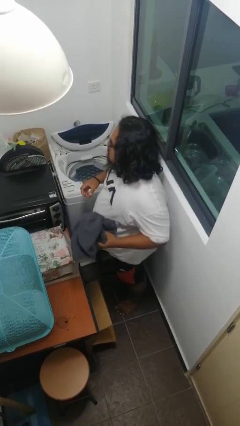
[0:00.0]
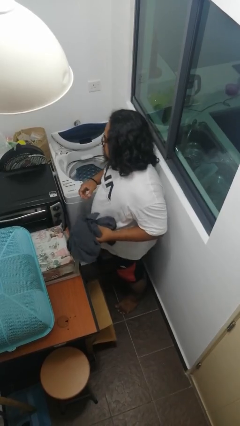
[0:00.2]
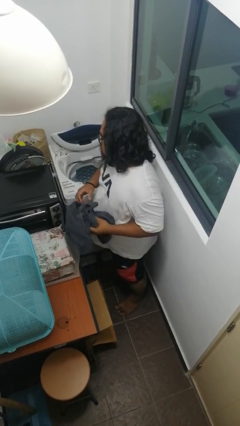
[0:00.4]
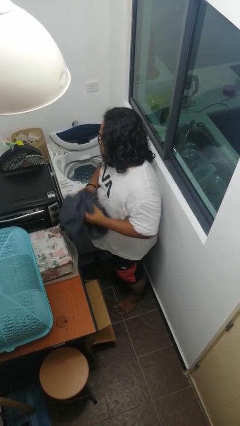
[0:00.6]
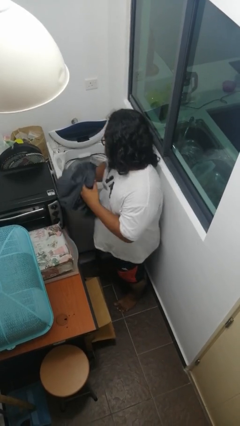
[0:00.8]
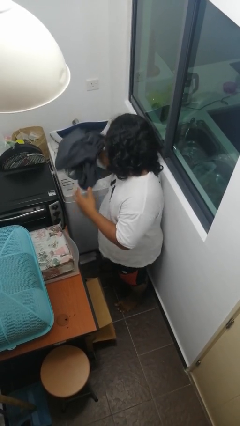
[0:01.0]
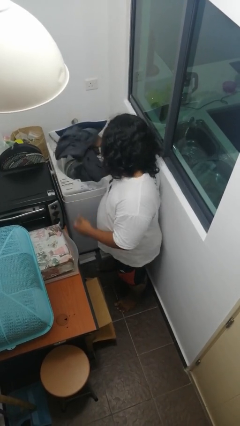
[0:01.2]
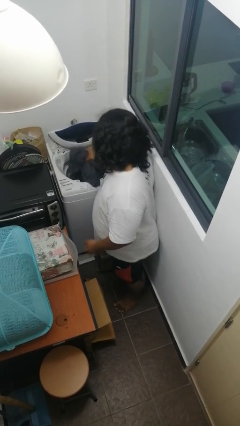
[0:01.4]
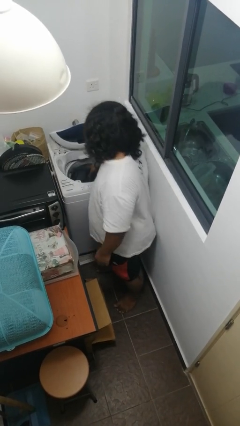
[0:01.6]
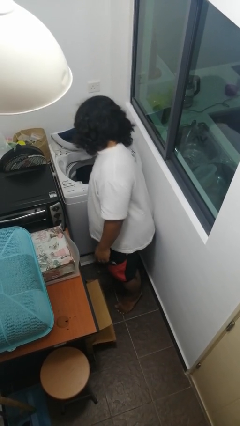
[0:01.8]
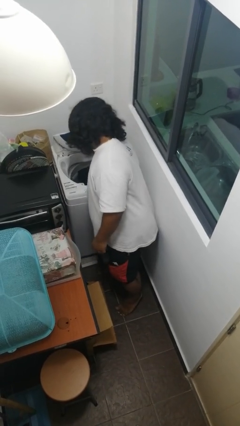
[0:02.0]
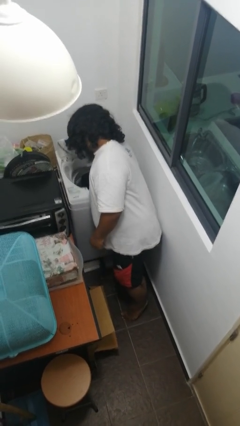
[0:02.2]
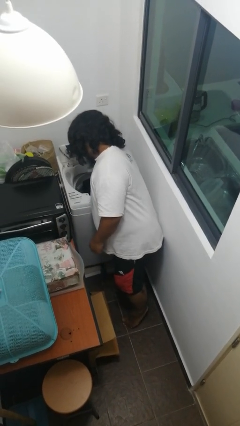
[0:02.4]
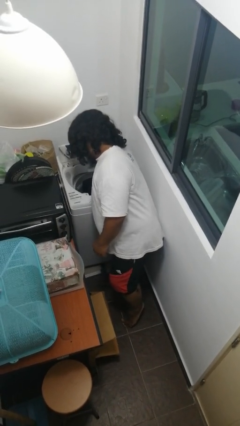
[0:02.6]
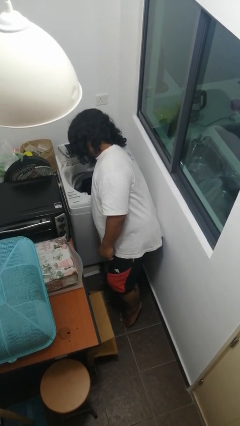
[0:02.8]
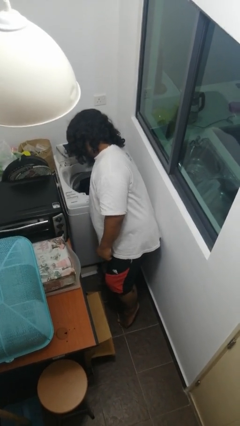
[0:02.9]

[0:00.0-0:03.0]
person loads clotheswasher

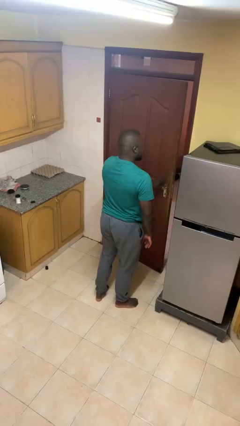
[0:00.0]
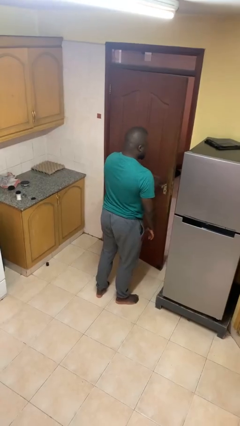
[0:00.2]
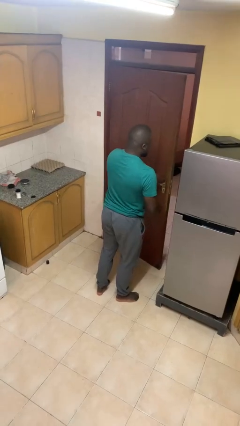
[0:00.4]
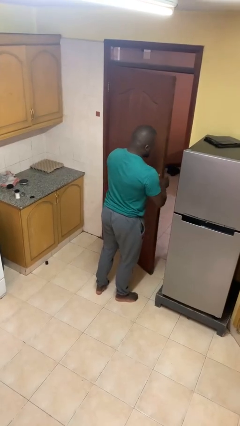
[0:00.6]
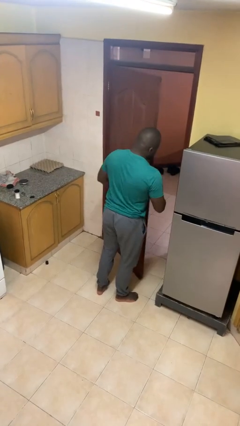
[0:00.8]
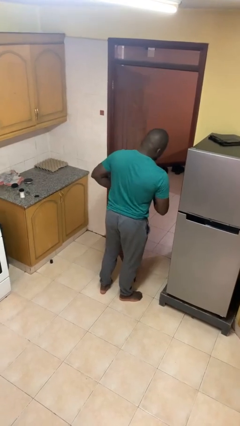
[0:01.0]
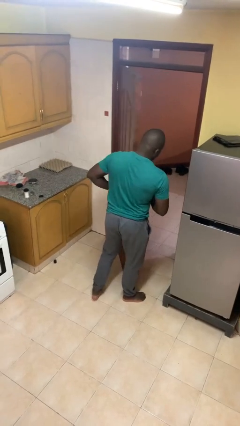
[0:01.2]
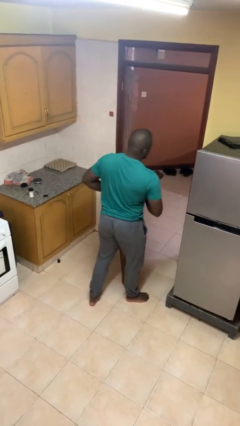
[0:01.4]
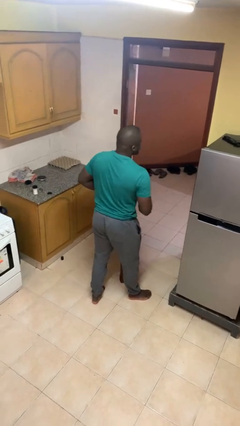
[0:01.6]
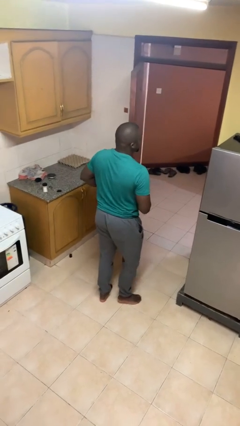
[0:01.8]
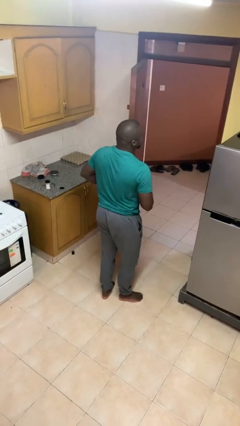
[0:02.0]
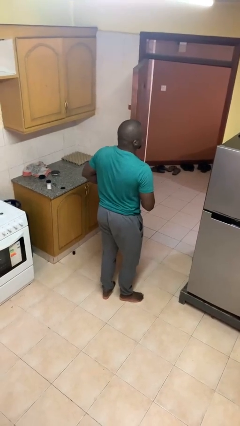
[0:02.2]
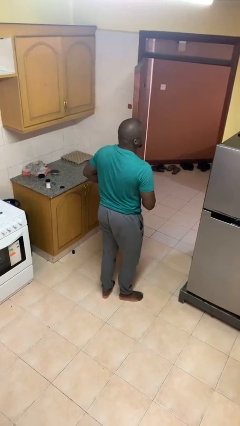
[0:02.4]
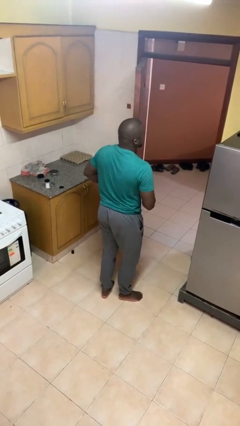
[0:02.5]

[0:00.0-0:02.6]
person opens facility door

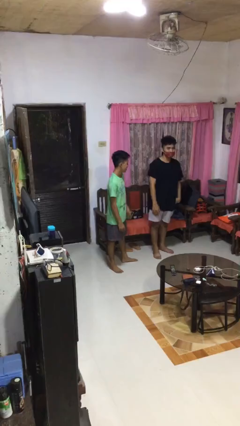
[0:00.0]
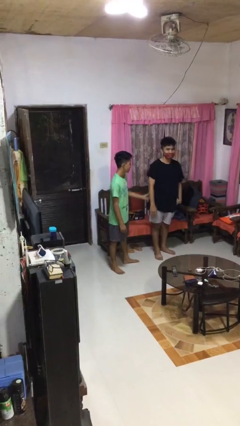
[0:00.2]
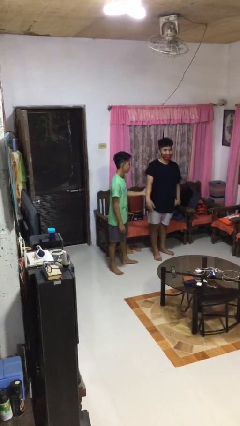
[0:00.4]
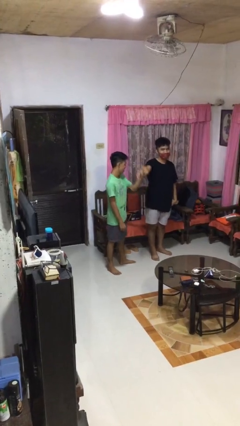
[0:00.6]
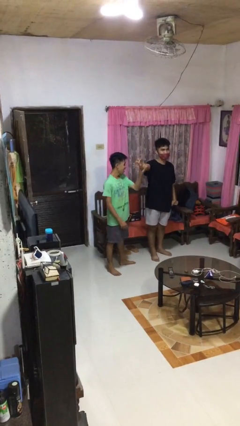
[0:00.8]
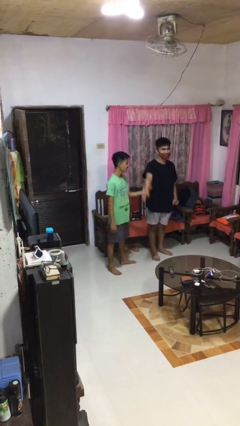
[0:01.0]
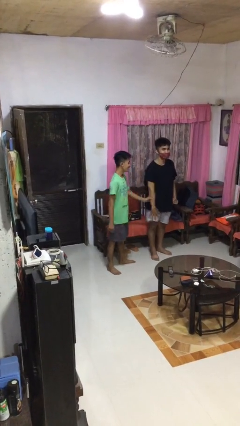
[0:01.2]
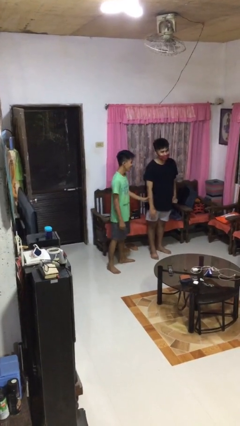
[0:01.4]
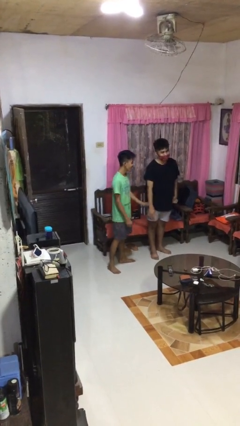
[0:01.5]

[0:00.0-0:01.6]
person grabs person by forearm

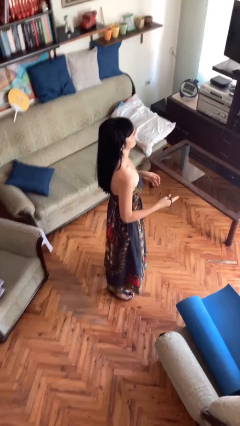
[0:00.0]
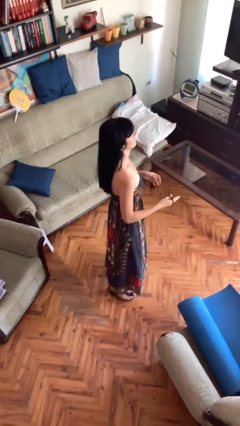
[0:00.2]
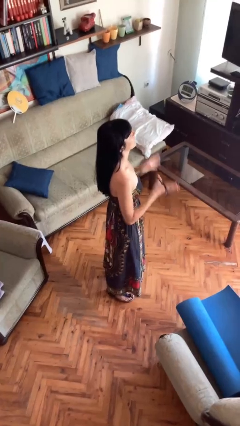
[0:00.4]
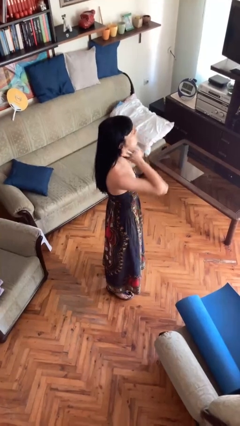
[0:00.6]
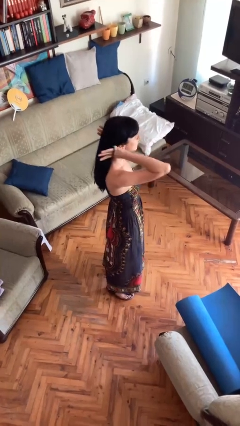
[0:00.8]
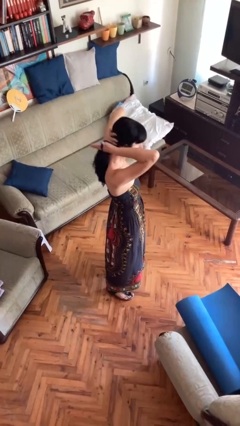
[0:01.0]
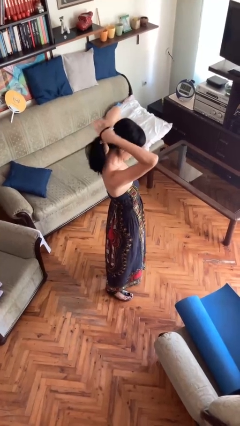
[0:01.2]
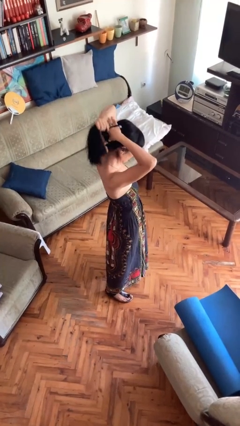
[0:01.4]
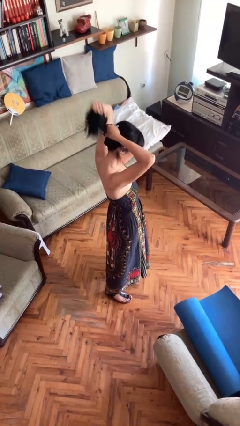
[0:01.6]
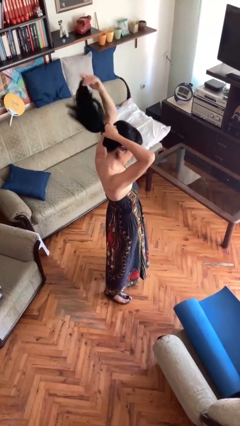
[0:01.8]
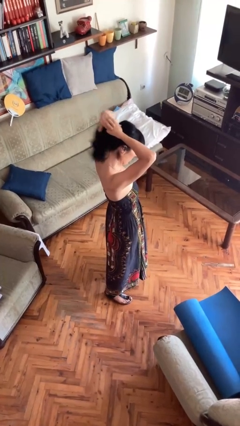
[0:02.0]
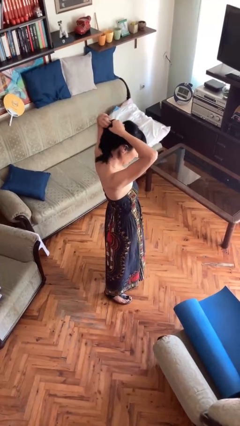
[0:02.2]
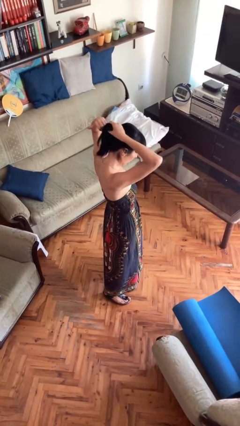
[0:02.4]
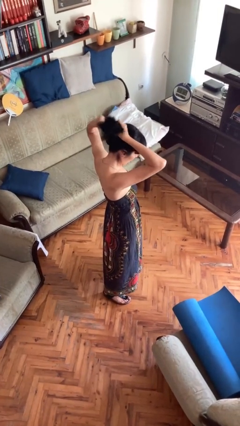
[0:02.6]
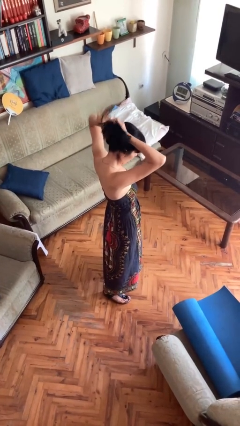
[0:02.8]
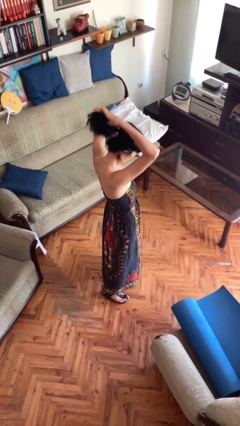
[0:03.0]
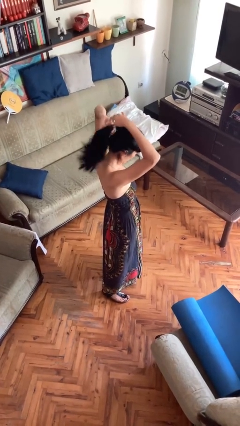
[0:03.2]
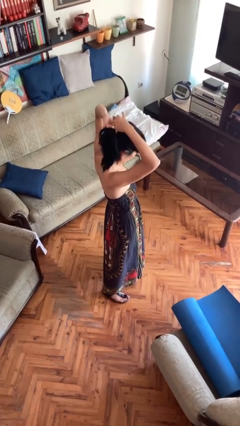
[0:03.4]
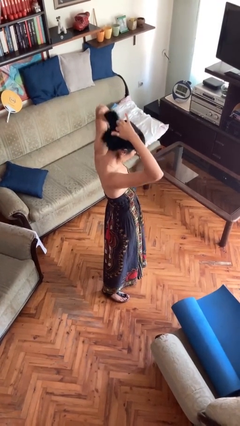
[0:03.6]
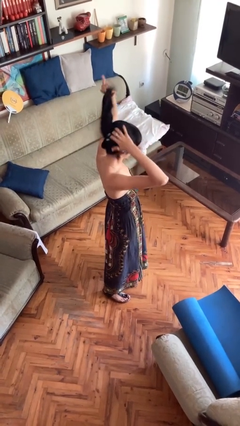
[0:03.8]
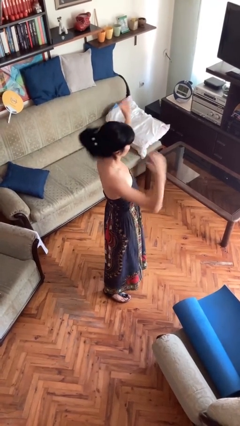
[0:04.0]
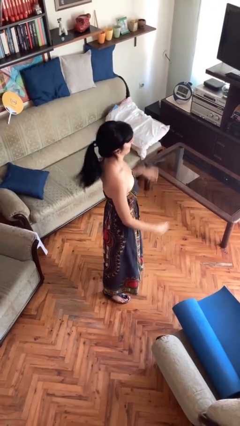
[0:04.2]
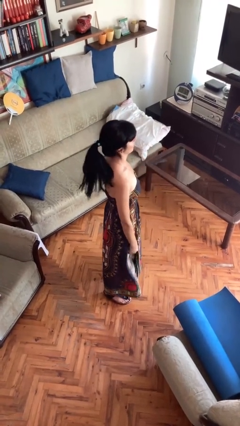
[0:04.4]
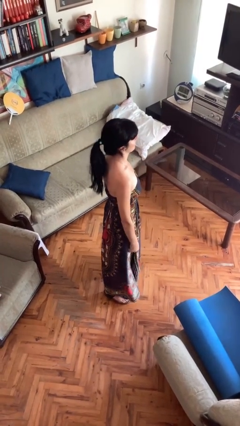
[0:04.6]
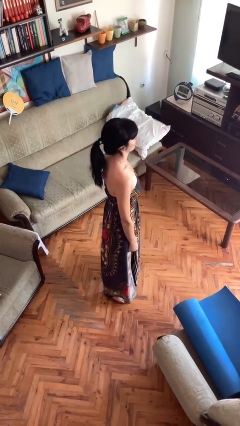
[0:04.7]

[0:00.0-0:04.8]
person puts hair in ponytail

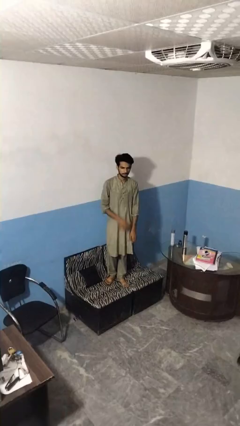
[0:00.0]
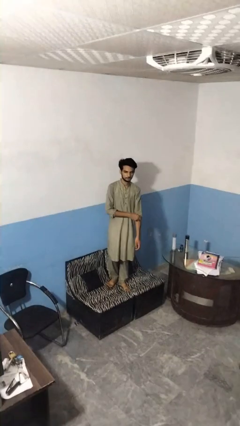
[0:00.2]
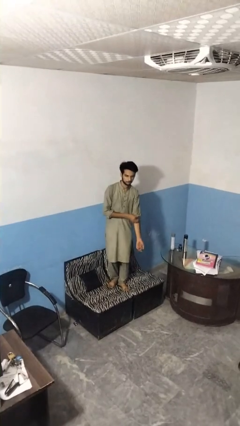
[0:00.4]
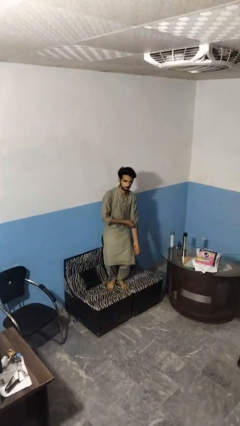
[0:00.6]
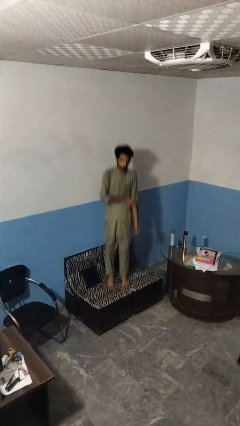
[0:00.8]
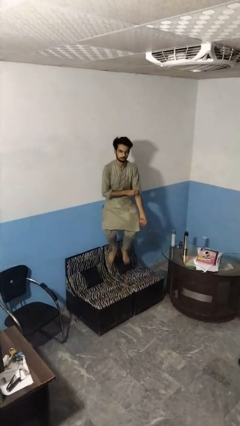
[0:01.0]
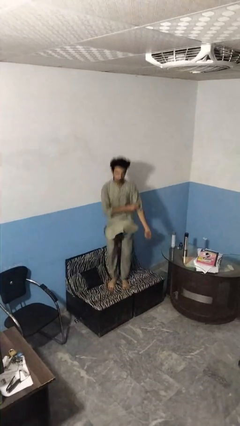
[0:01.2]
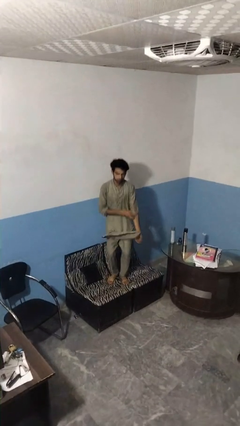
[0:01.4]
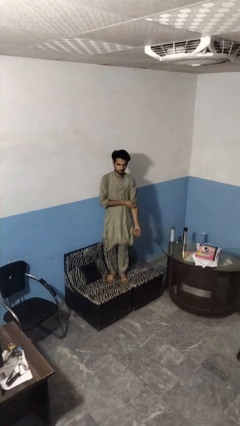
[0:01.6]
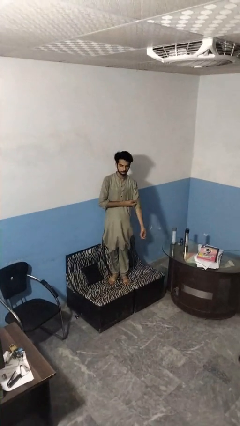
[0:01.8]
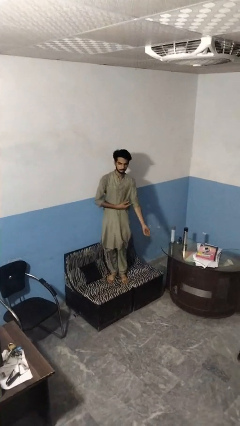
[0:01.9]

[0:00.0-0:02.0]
person jumps on couch

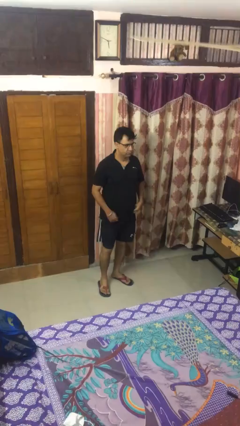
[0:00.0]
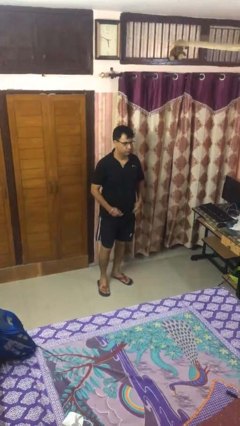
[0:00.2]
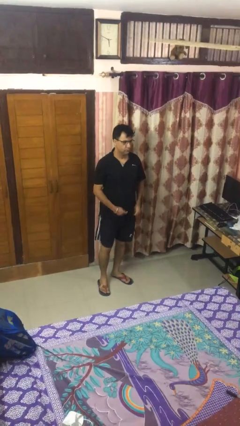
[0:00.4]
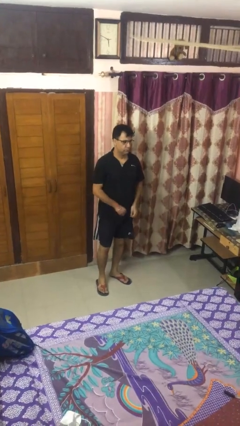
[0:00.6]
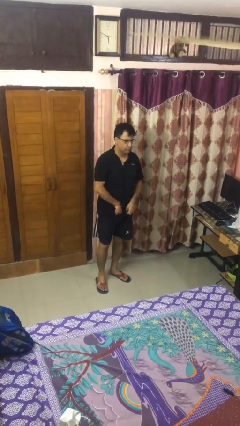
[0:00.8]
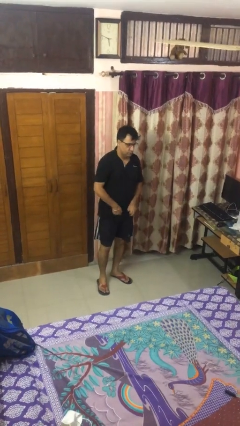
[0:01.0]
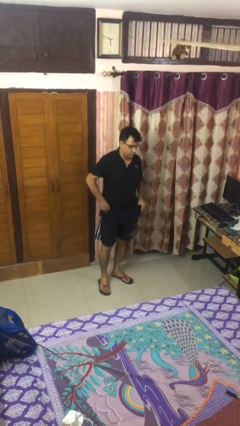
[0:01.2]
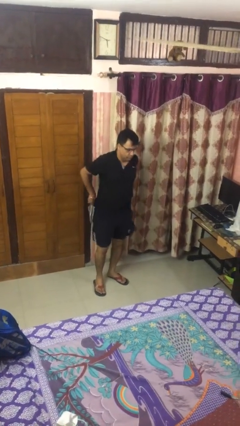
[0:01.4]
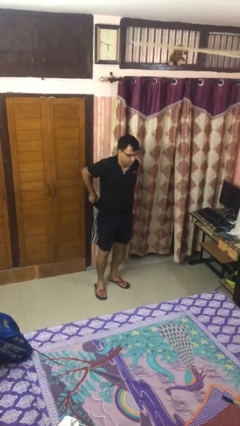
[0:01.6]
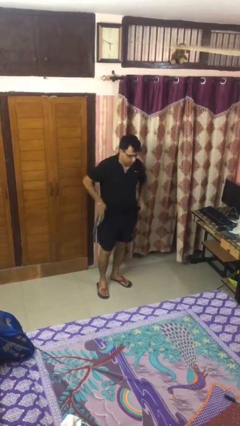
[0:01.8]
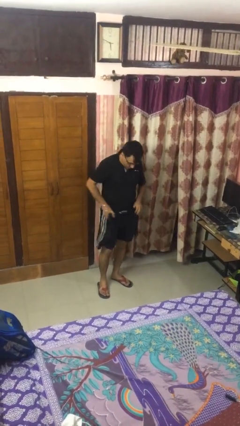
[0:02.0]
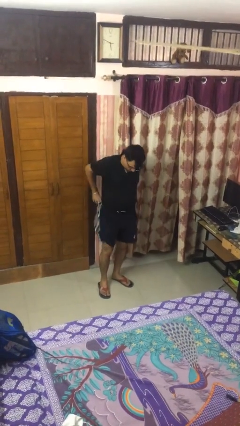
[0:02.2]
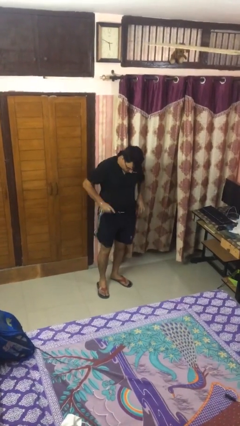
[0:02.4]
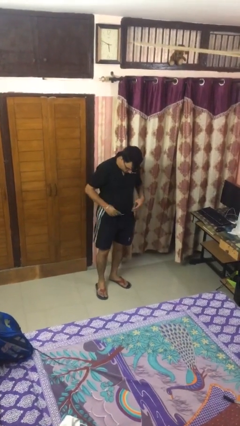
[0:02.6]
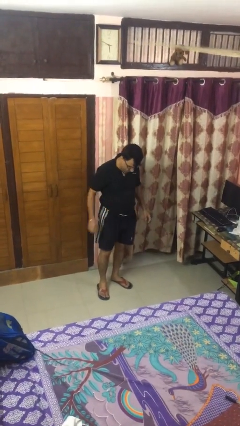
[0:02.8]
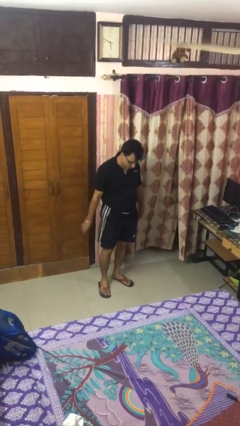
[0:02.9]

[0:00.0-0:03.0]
person tucks in shirt
